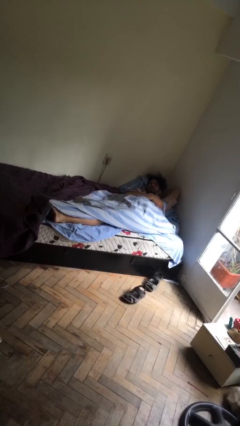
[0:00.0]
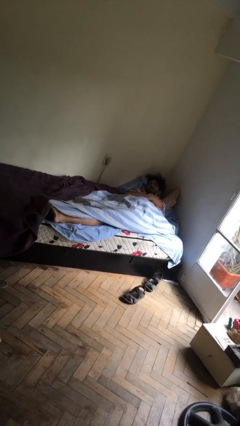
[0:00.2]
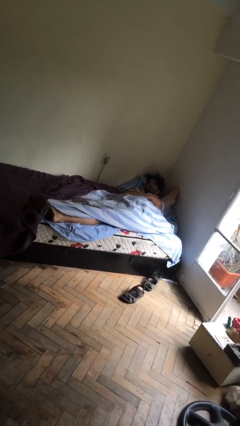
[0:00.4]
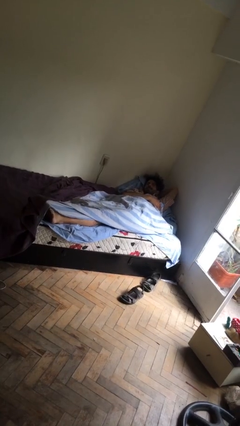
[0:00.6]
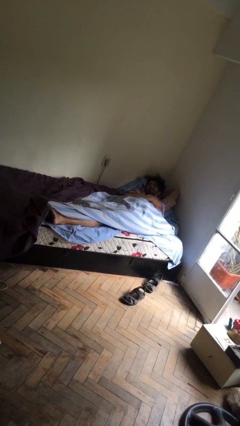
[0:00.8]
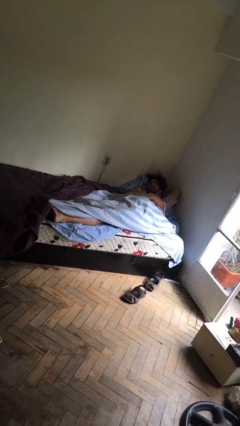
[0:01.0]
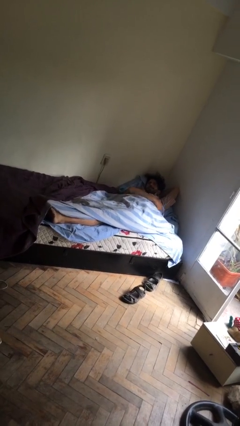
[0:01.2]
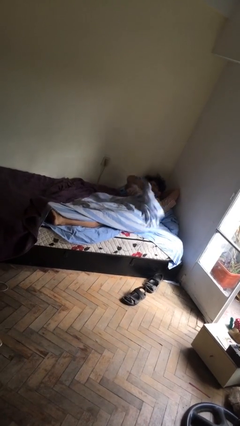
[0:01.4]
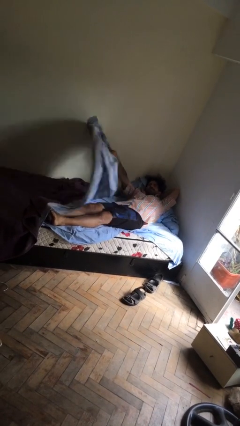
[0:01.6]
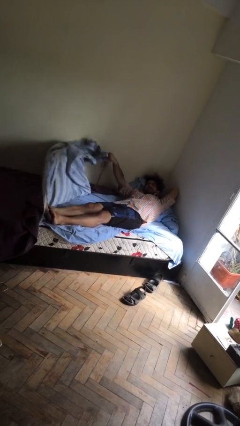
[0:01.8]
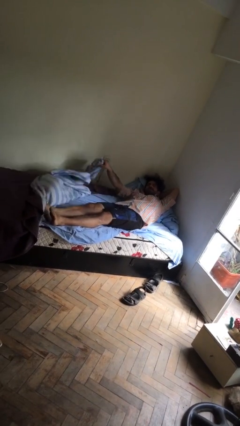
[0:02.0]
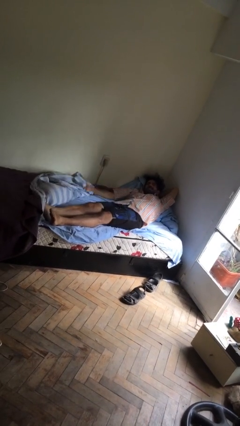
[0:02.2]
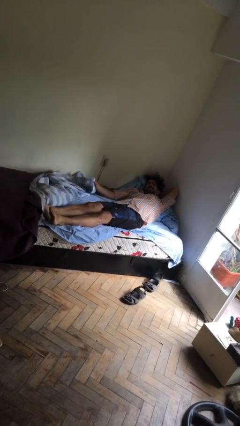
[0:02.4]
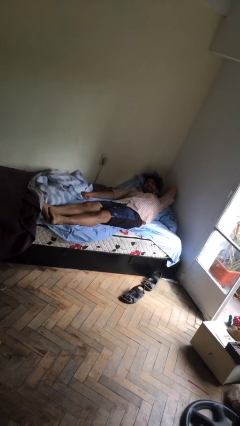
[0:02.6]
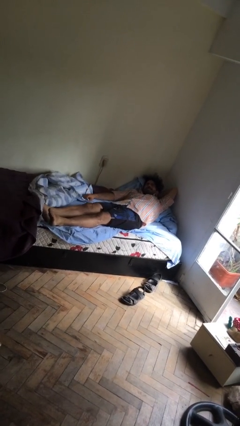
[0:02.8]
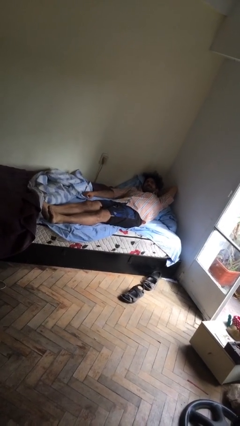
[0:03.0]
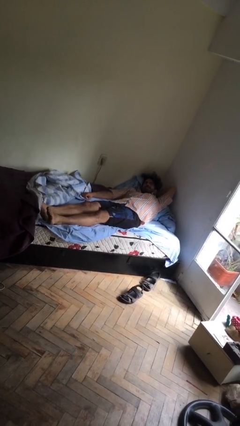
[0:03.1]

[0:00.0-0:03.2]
person uncovers with bedsheets

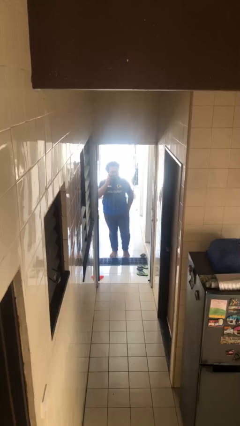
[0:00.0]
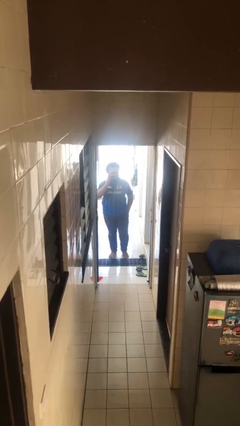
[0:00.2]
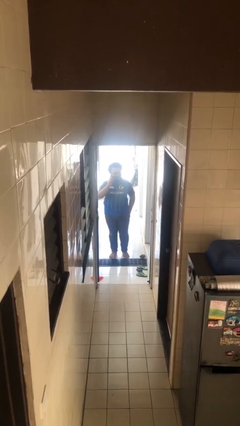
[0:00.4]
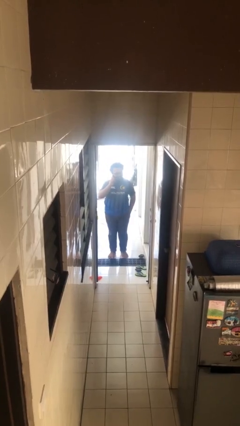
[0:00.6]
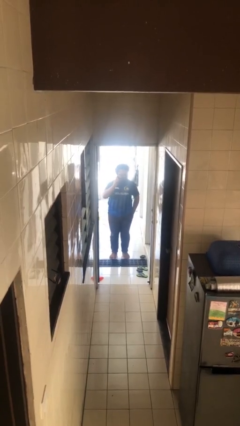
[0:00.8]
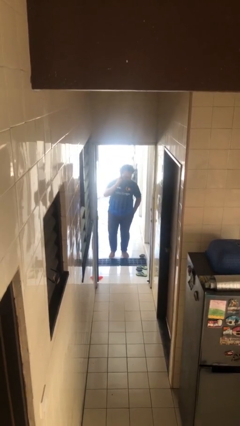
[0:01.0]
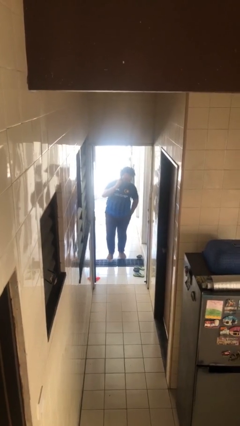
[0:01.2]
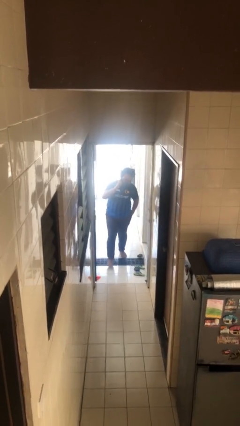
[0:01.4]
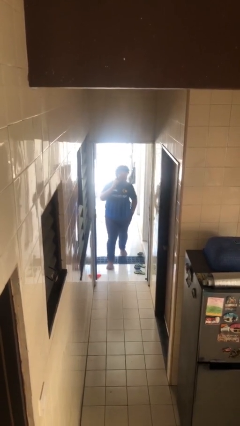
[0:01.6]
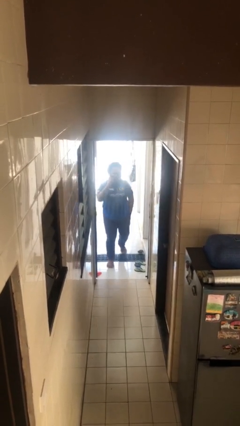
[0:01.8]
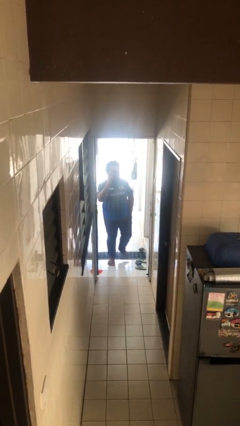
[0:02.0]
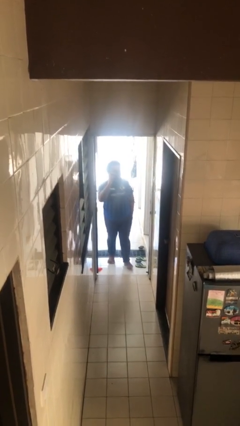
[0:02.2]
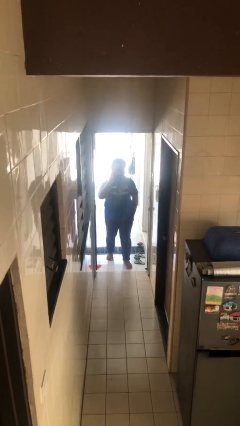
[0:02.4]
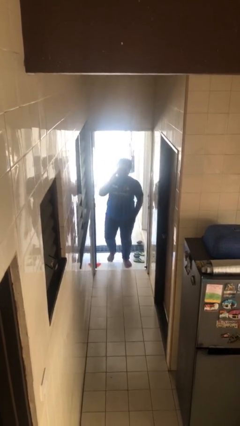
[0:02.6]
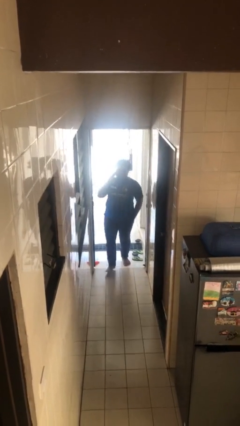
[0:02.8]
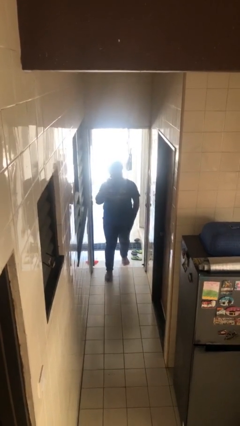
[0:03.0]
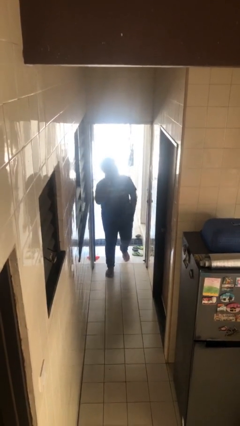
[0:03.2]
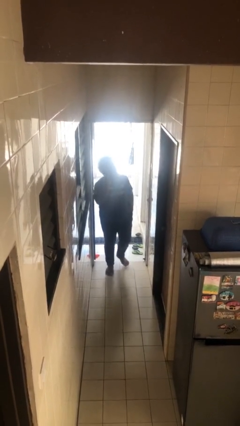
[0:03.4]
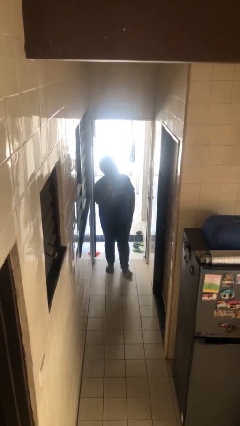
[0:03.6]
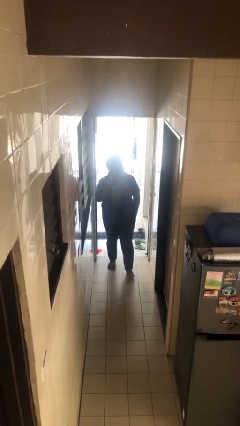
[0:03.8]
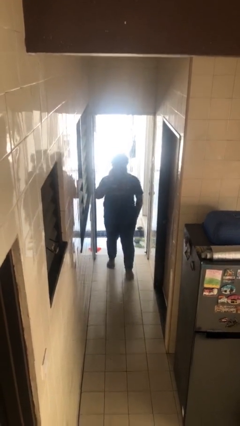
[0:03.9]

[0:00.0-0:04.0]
person enters scene through structure

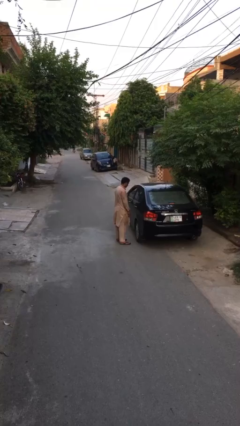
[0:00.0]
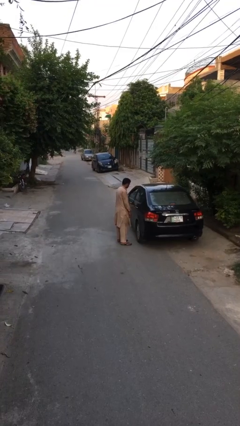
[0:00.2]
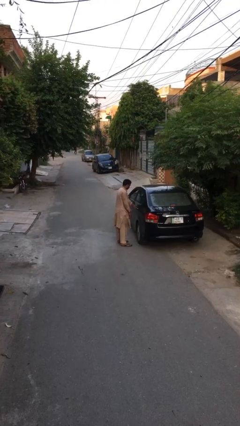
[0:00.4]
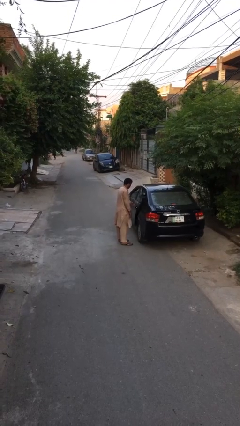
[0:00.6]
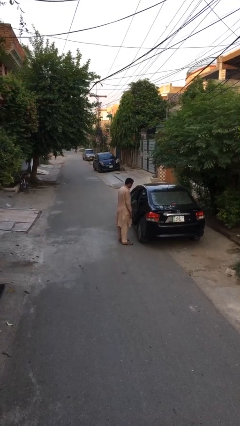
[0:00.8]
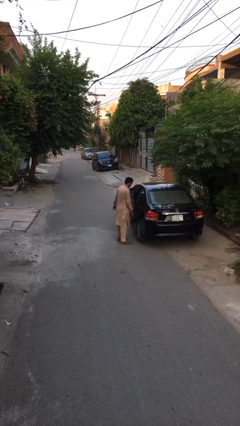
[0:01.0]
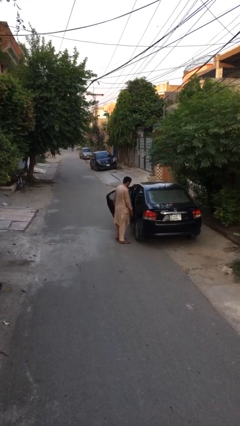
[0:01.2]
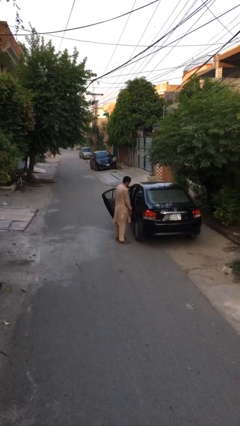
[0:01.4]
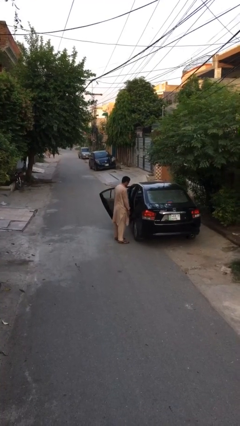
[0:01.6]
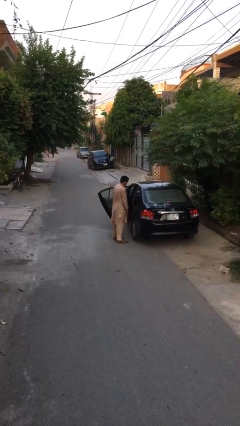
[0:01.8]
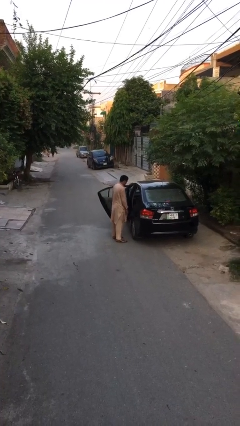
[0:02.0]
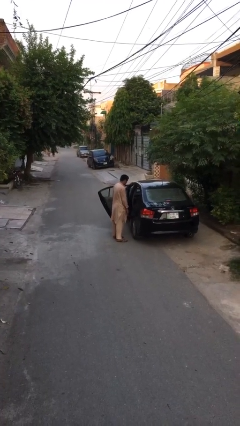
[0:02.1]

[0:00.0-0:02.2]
person opens car door

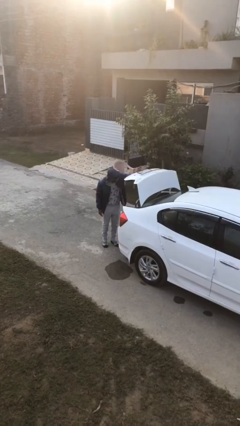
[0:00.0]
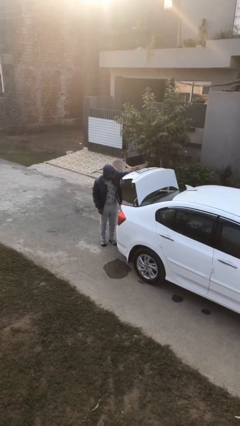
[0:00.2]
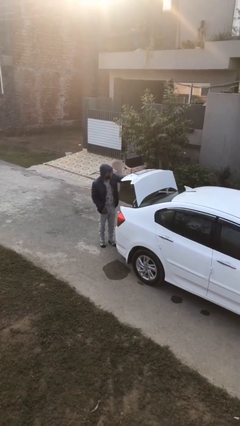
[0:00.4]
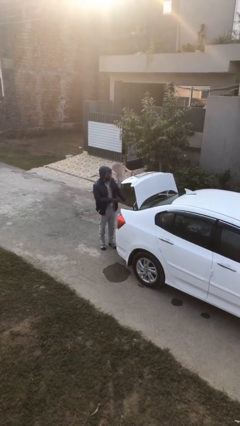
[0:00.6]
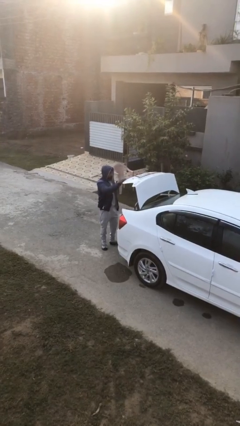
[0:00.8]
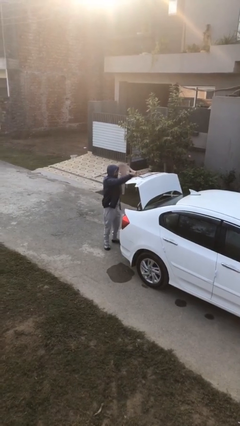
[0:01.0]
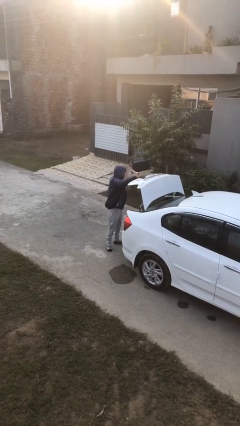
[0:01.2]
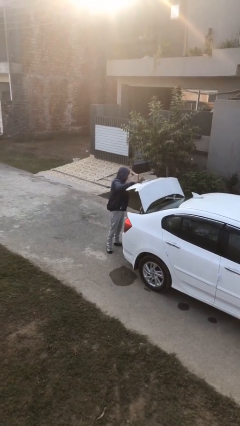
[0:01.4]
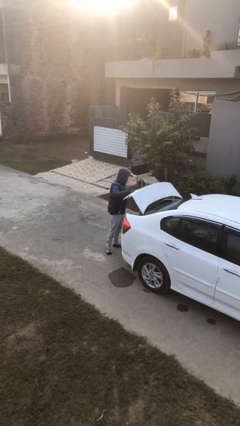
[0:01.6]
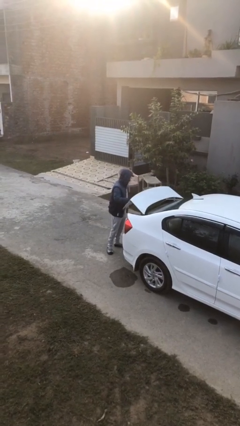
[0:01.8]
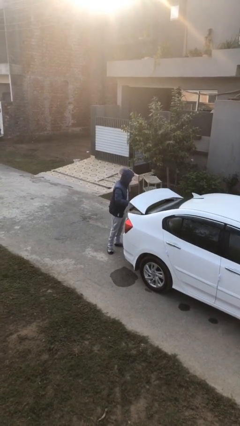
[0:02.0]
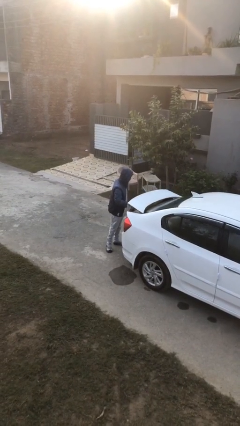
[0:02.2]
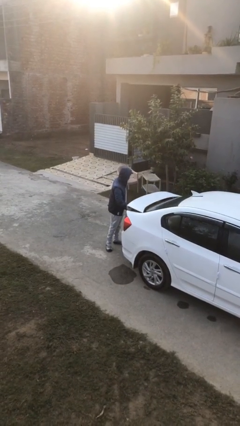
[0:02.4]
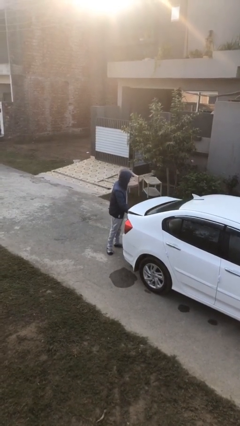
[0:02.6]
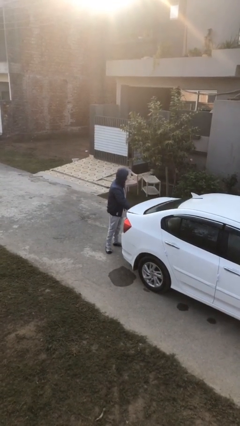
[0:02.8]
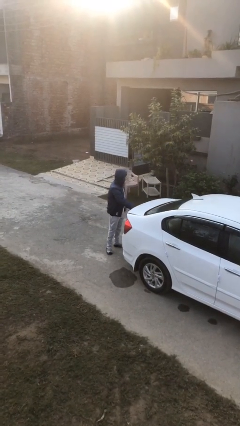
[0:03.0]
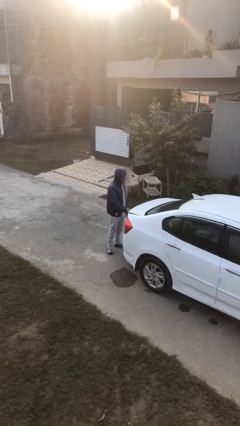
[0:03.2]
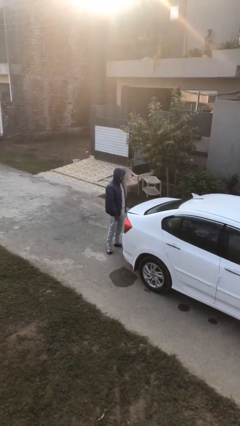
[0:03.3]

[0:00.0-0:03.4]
person closes car trunk

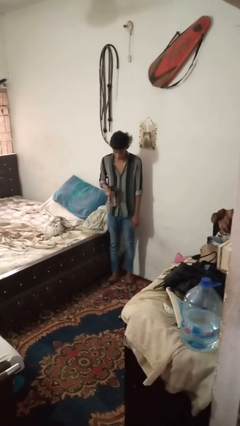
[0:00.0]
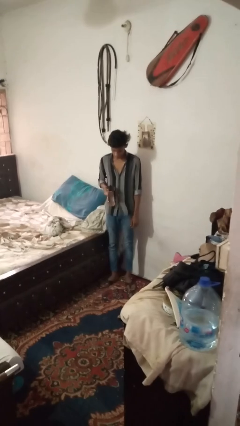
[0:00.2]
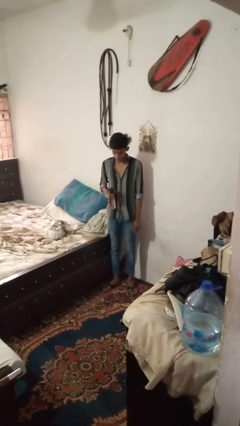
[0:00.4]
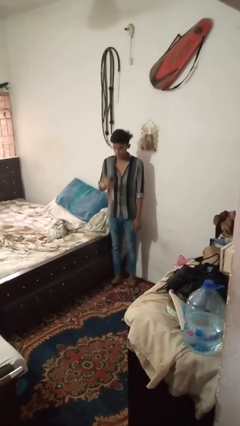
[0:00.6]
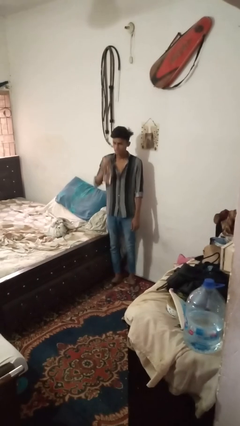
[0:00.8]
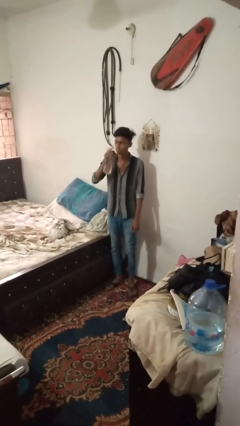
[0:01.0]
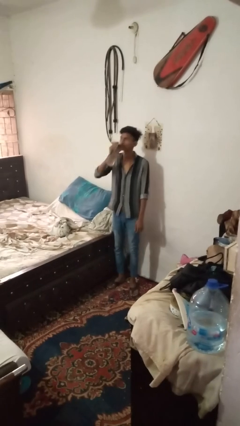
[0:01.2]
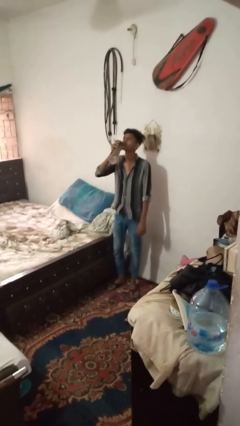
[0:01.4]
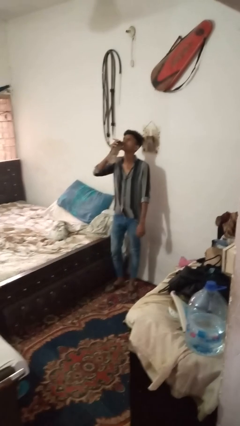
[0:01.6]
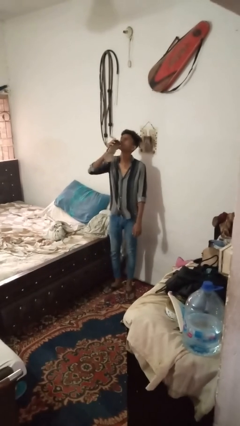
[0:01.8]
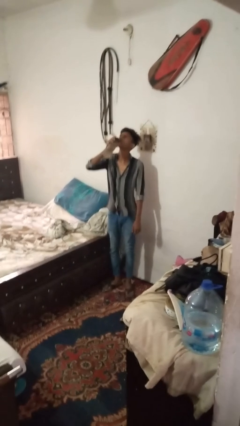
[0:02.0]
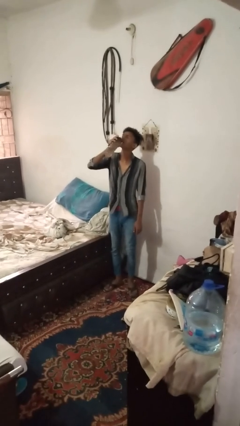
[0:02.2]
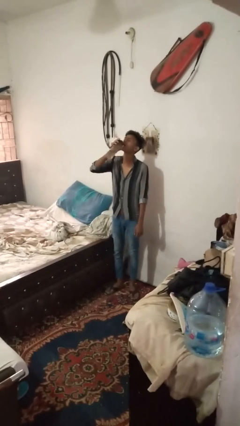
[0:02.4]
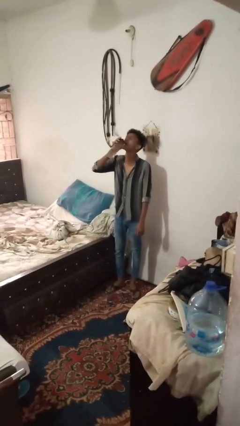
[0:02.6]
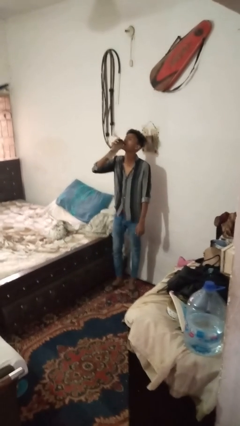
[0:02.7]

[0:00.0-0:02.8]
person drinks from bottle

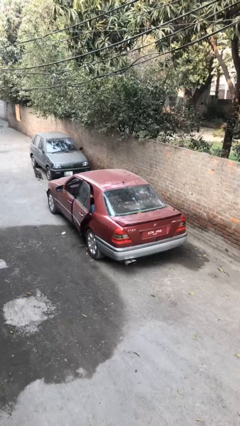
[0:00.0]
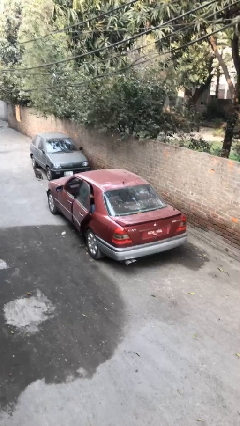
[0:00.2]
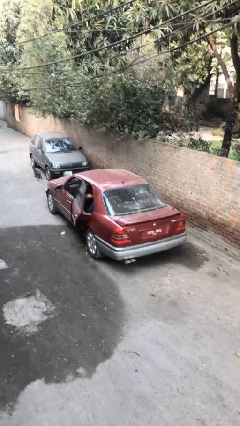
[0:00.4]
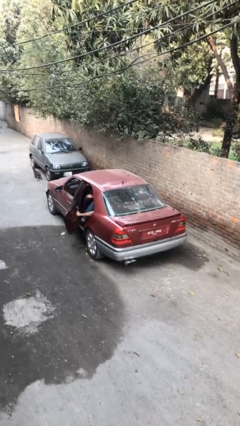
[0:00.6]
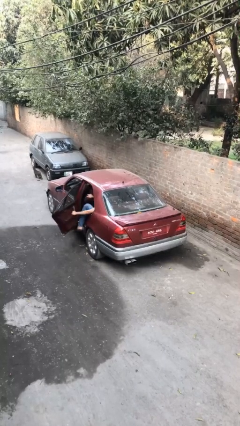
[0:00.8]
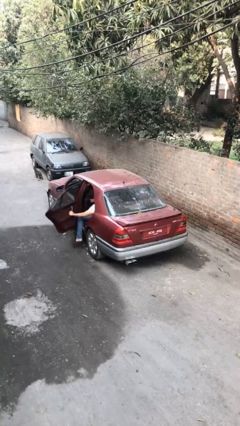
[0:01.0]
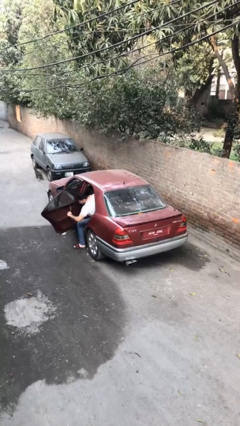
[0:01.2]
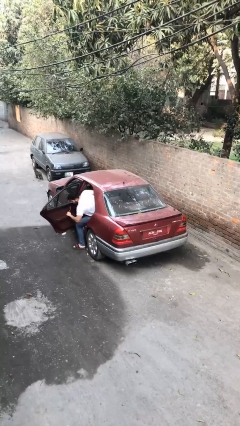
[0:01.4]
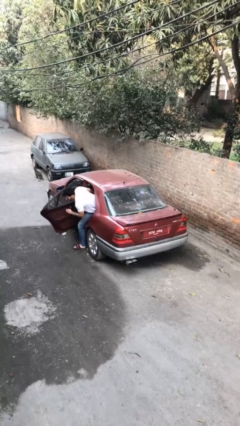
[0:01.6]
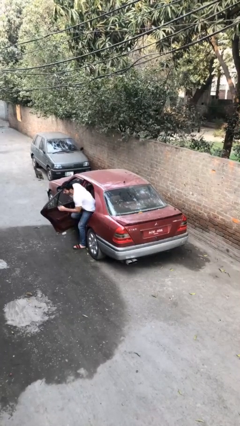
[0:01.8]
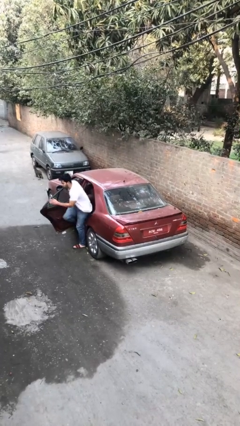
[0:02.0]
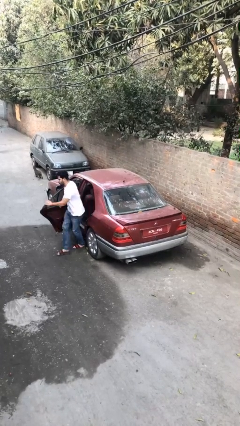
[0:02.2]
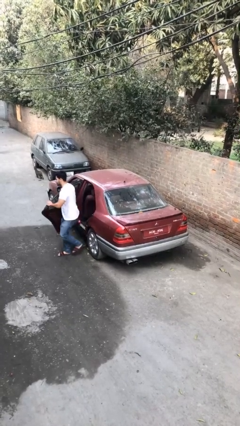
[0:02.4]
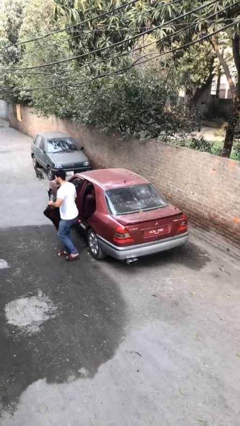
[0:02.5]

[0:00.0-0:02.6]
car drops off person
